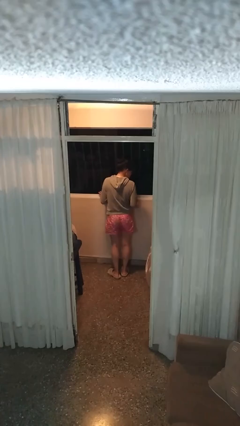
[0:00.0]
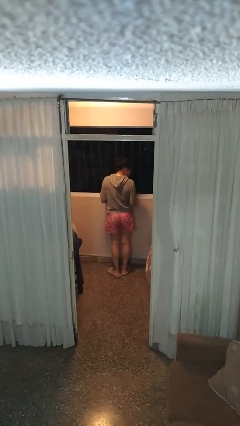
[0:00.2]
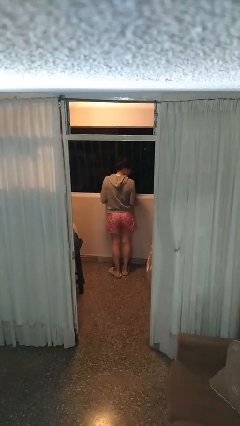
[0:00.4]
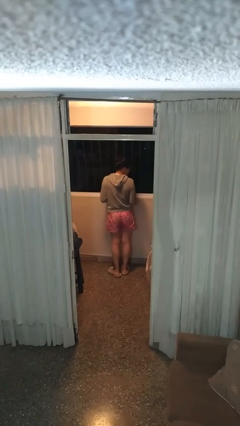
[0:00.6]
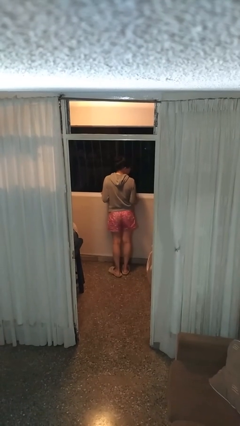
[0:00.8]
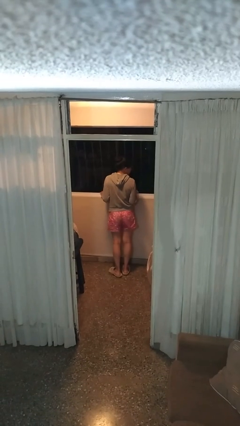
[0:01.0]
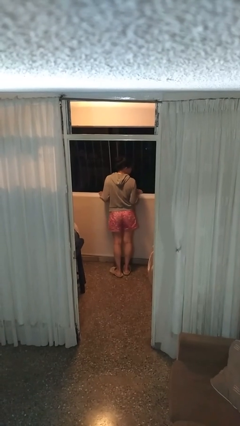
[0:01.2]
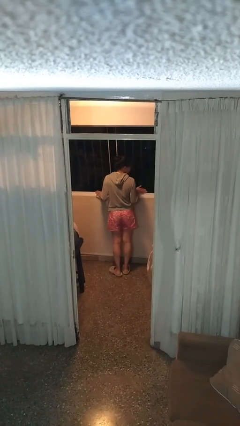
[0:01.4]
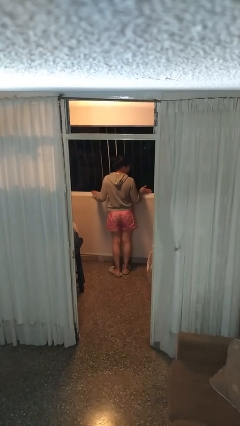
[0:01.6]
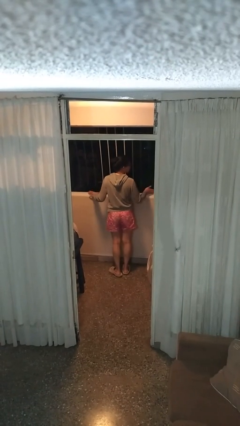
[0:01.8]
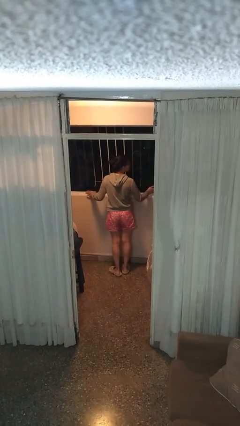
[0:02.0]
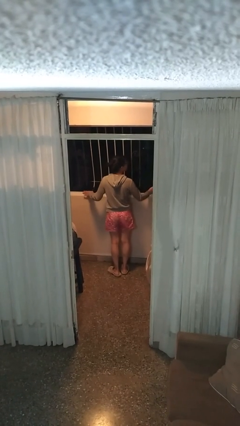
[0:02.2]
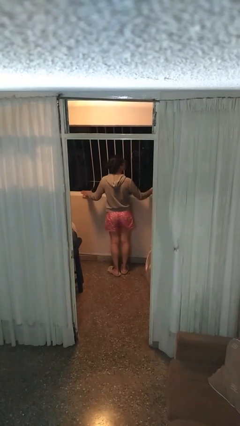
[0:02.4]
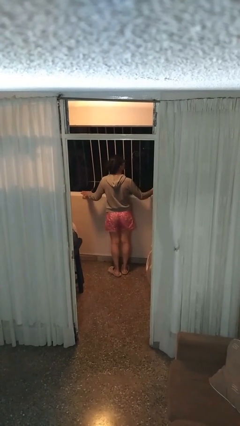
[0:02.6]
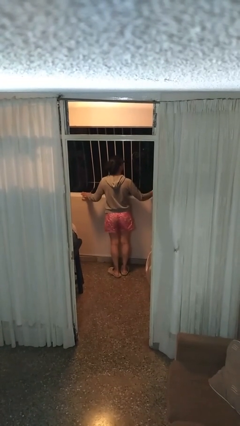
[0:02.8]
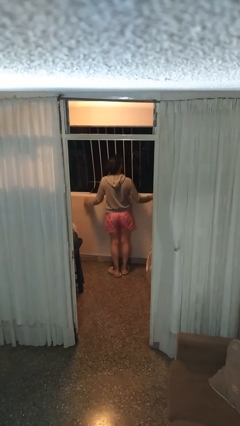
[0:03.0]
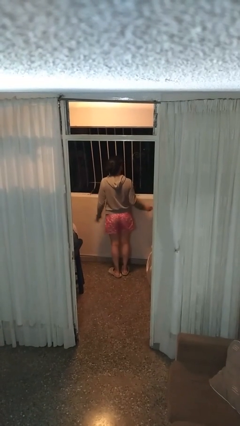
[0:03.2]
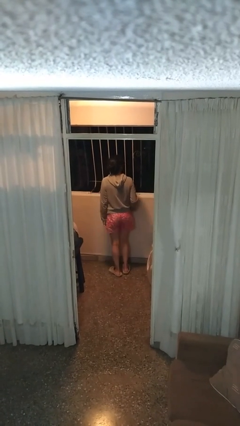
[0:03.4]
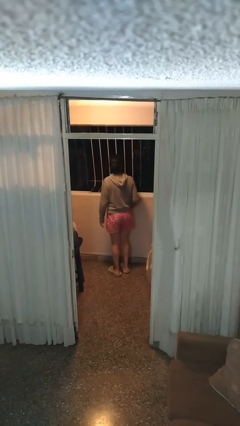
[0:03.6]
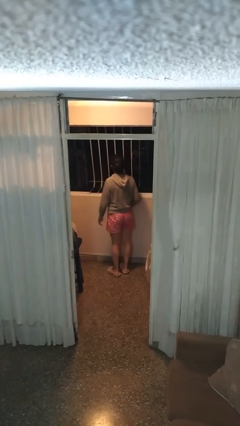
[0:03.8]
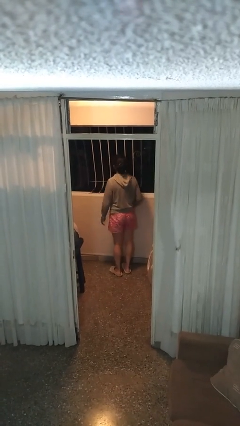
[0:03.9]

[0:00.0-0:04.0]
person opens home window

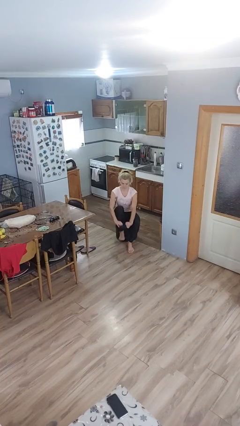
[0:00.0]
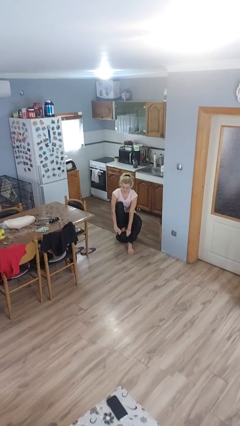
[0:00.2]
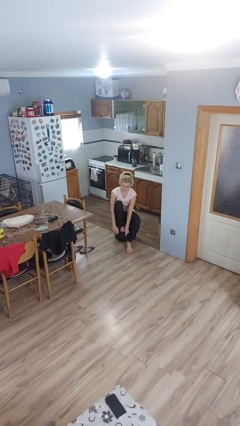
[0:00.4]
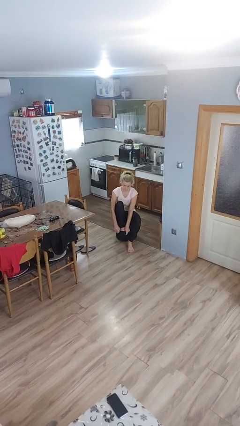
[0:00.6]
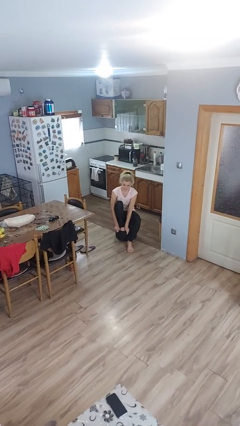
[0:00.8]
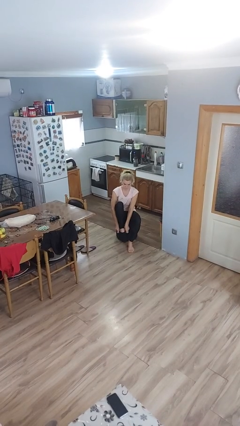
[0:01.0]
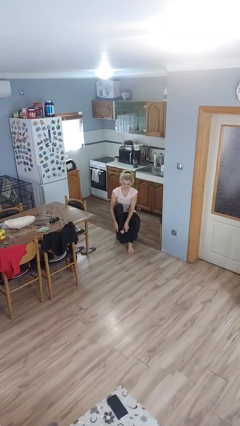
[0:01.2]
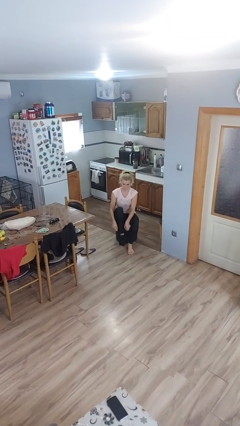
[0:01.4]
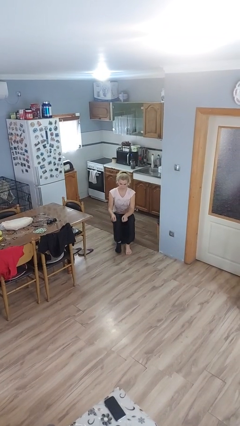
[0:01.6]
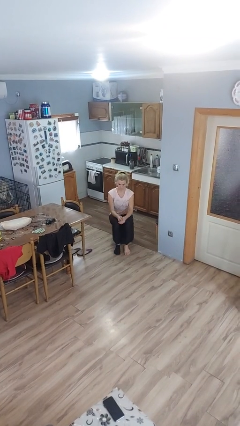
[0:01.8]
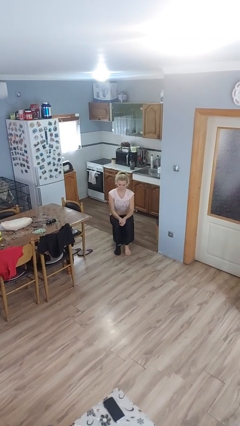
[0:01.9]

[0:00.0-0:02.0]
person puts on socks

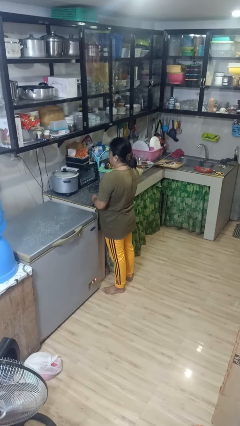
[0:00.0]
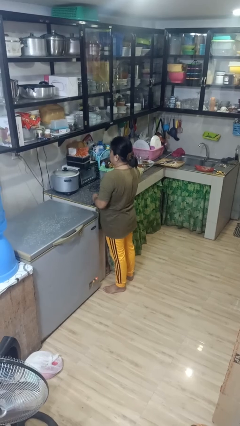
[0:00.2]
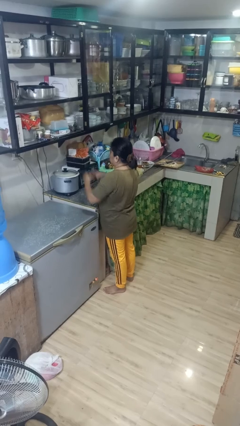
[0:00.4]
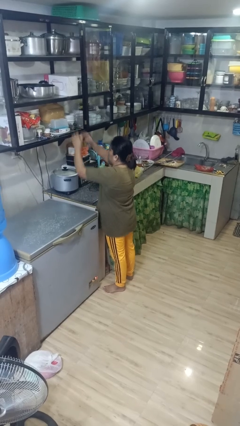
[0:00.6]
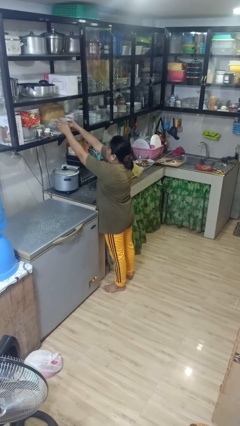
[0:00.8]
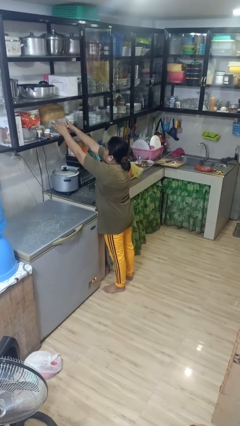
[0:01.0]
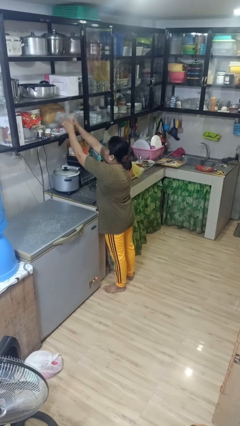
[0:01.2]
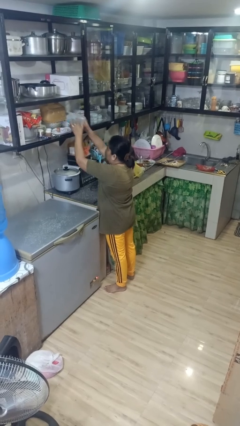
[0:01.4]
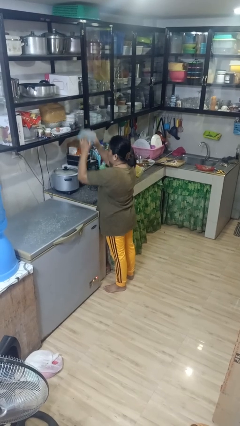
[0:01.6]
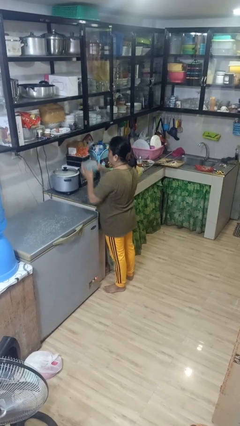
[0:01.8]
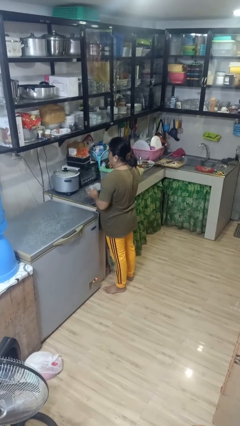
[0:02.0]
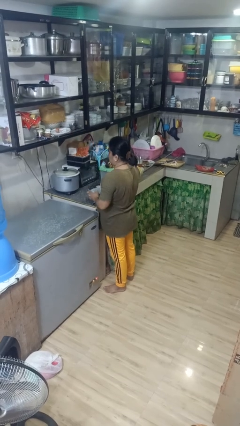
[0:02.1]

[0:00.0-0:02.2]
person takes object from cabinet

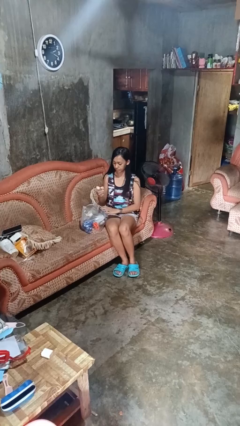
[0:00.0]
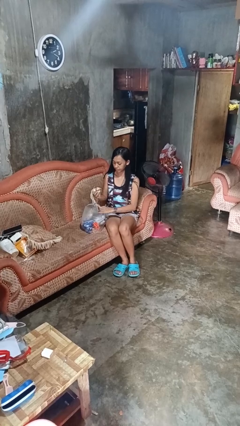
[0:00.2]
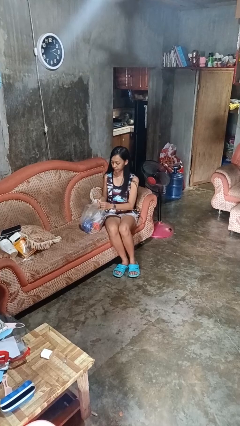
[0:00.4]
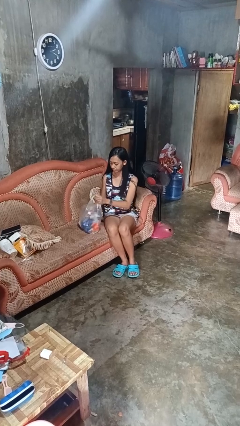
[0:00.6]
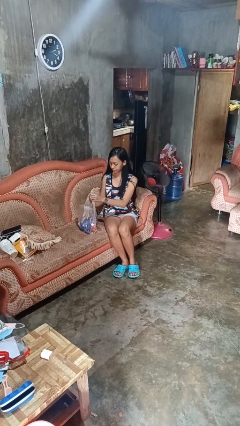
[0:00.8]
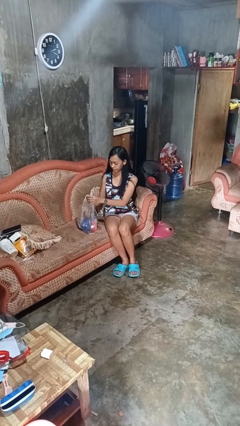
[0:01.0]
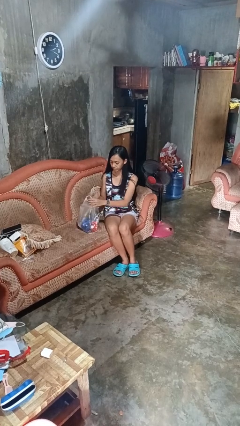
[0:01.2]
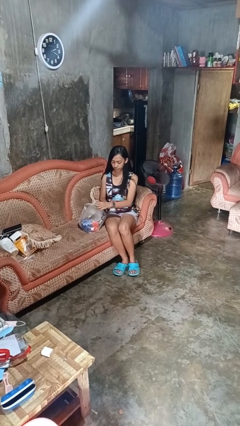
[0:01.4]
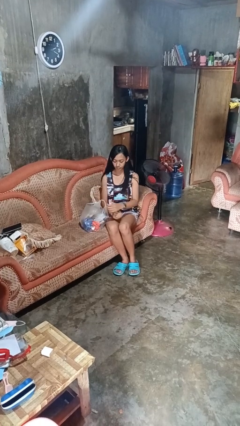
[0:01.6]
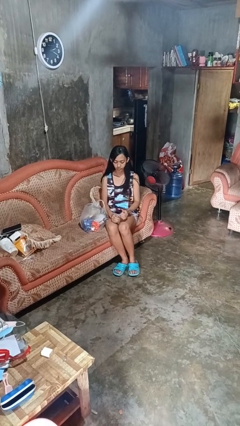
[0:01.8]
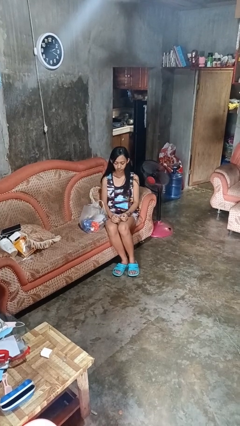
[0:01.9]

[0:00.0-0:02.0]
person puts object into bag

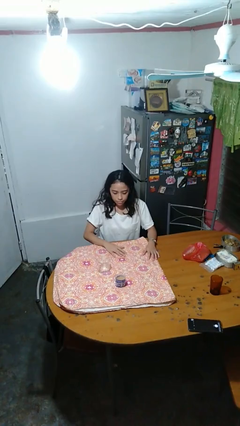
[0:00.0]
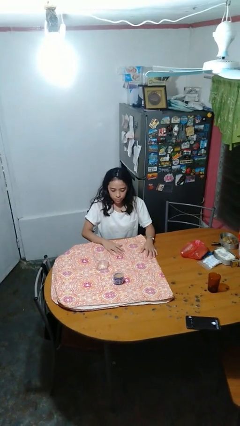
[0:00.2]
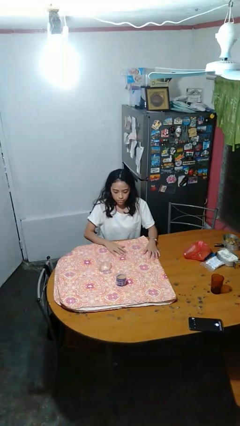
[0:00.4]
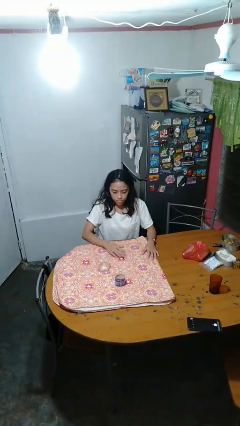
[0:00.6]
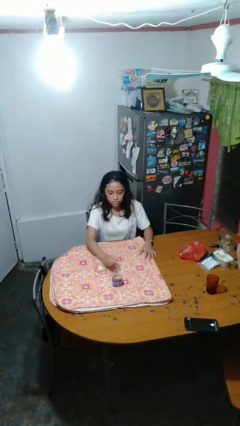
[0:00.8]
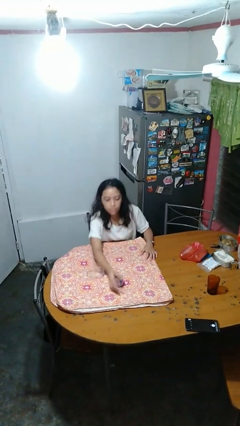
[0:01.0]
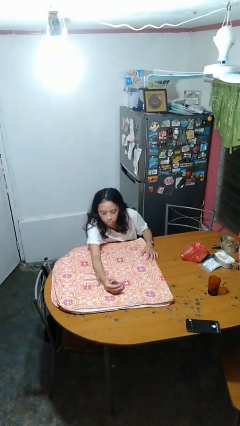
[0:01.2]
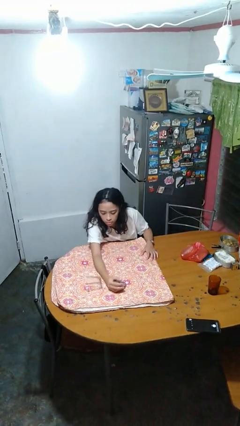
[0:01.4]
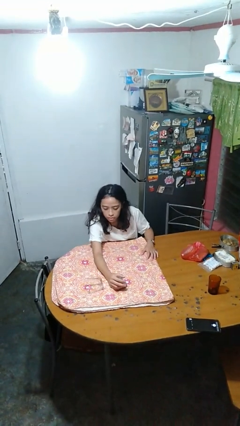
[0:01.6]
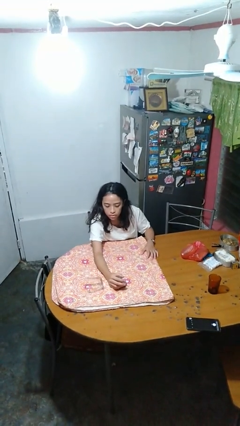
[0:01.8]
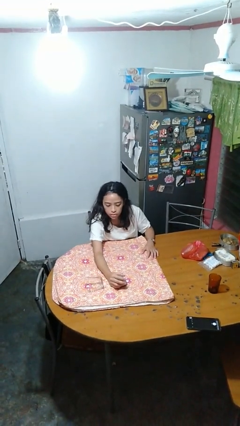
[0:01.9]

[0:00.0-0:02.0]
person knocks over glass

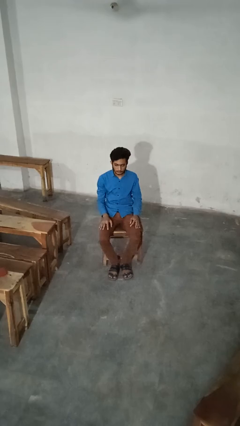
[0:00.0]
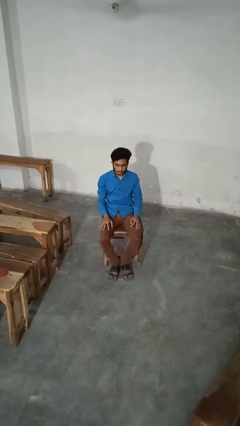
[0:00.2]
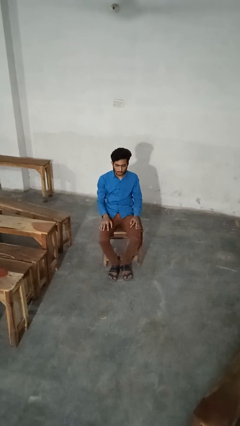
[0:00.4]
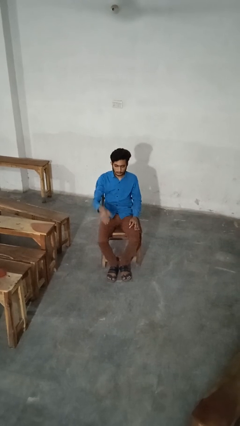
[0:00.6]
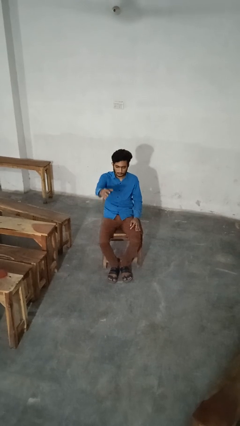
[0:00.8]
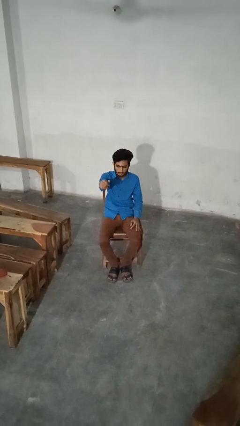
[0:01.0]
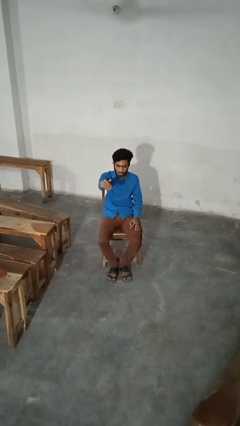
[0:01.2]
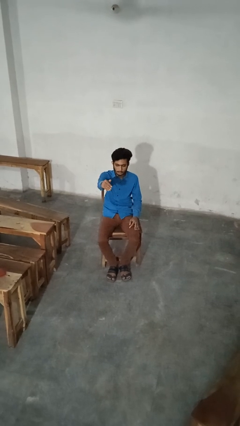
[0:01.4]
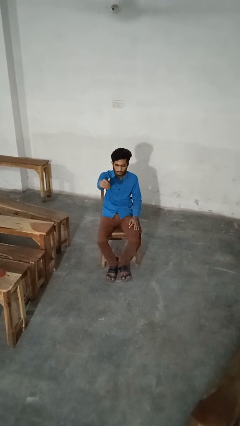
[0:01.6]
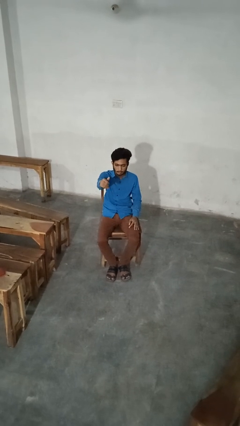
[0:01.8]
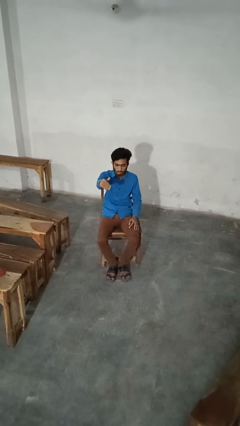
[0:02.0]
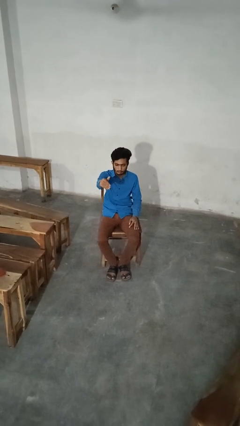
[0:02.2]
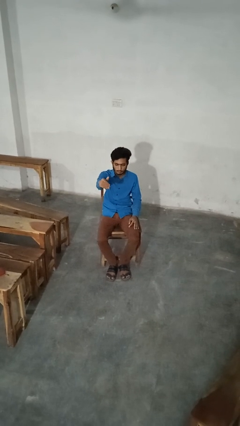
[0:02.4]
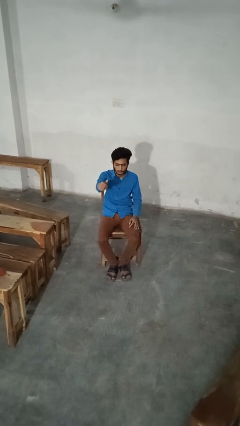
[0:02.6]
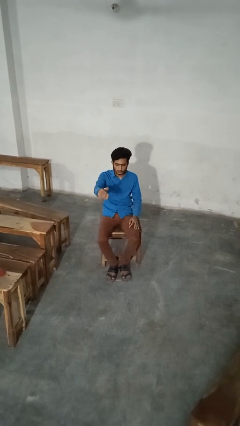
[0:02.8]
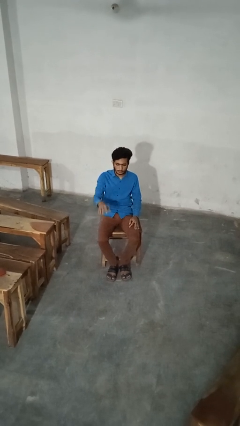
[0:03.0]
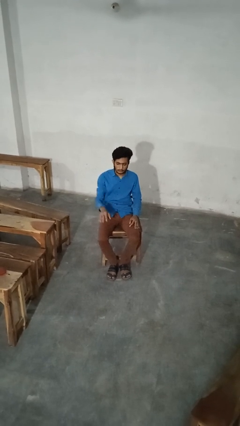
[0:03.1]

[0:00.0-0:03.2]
person gestures come here

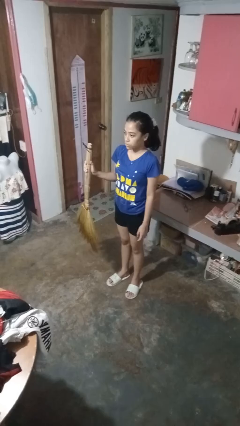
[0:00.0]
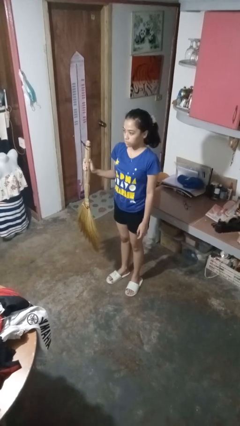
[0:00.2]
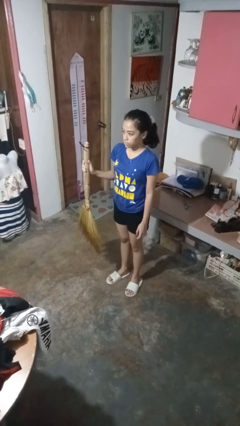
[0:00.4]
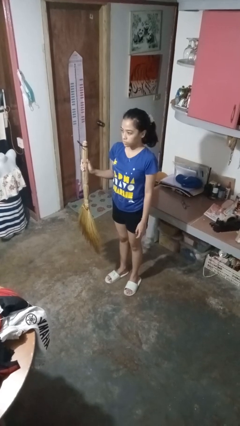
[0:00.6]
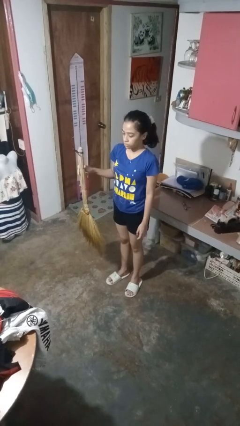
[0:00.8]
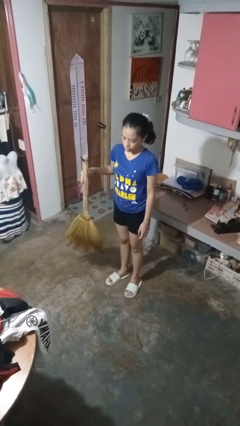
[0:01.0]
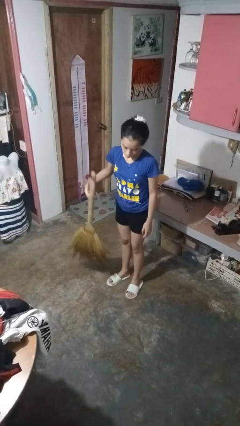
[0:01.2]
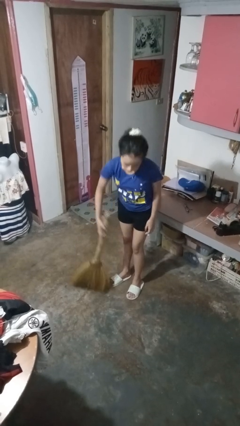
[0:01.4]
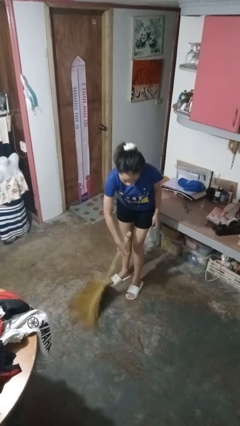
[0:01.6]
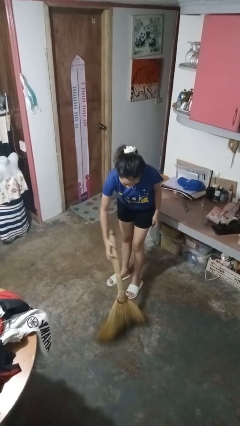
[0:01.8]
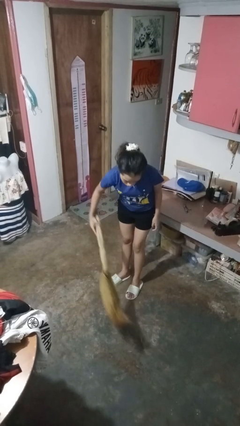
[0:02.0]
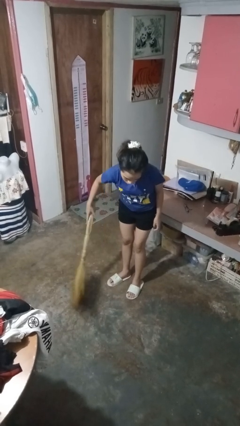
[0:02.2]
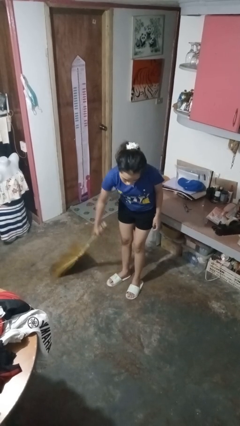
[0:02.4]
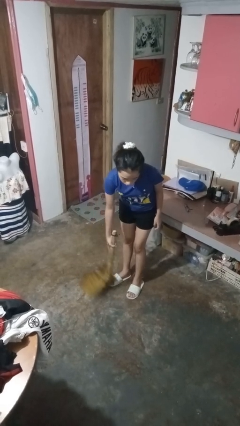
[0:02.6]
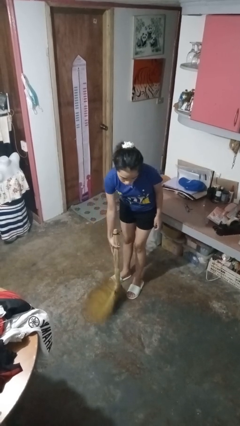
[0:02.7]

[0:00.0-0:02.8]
person sweeps floor
